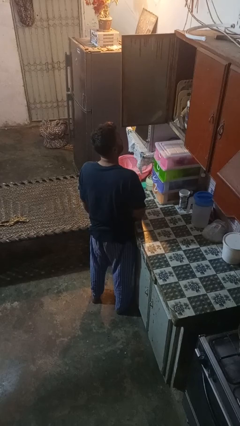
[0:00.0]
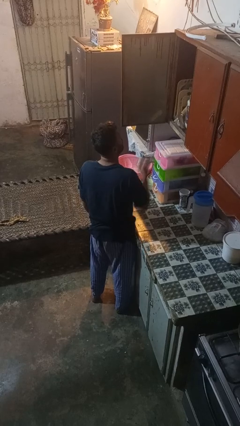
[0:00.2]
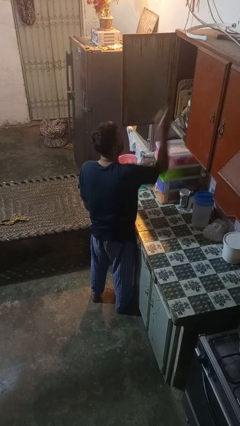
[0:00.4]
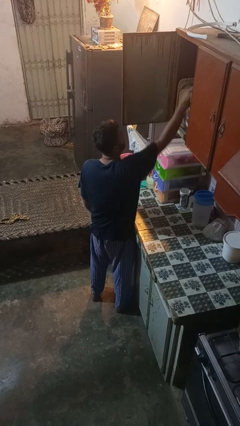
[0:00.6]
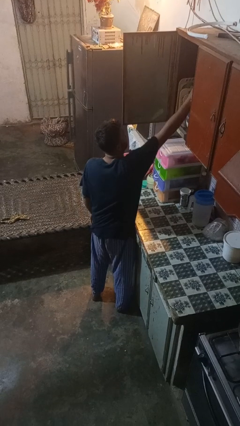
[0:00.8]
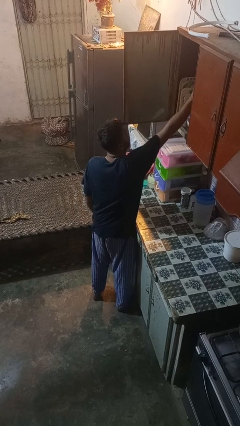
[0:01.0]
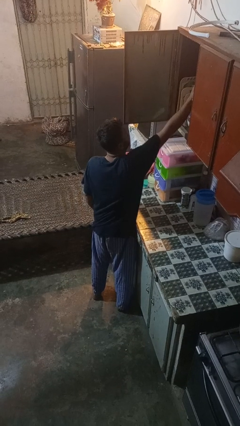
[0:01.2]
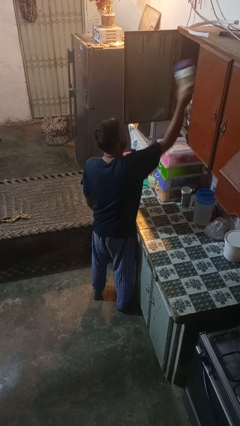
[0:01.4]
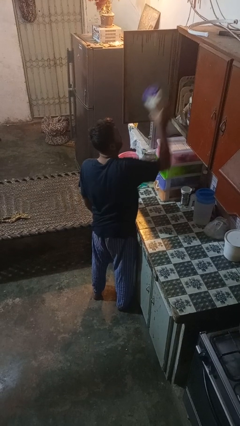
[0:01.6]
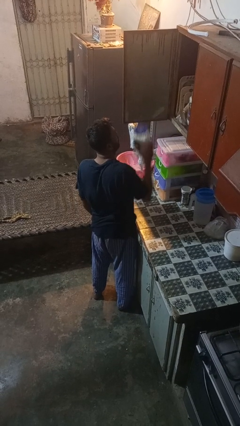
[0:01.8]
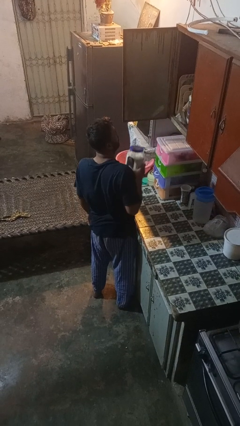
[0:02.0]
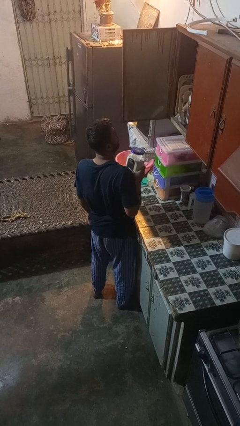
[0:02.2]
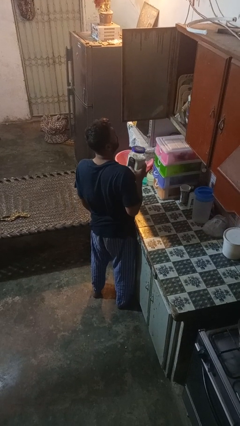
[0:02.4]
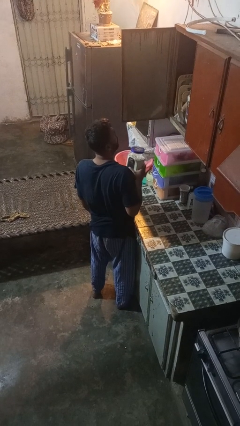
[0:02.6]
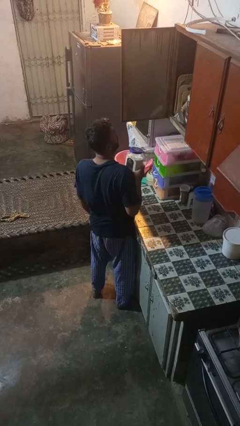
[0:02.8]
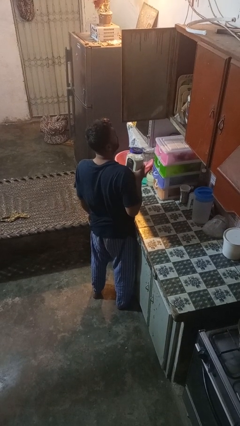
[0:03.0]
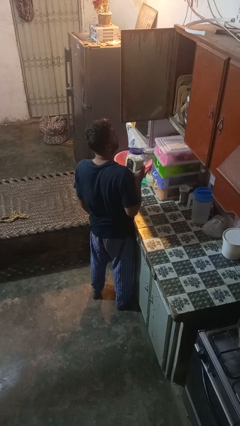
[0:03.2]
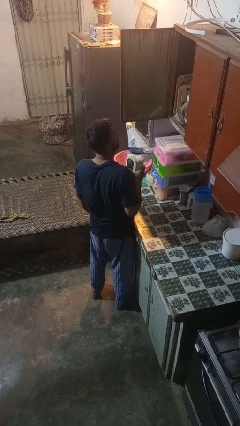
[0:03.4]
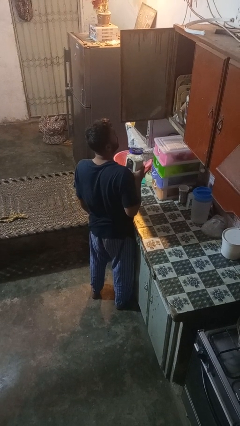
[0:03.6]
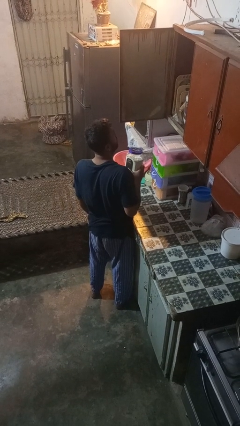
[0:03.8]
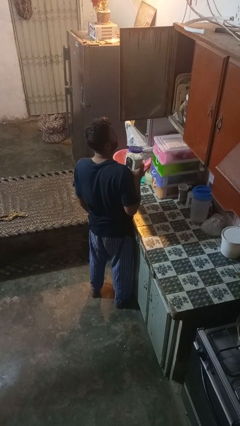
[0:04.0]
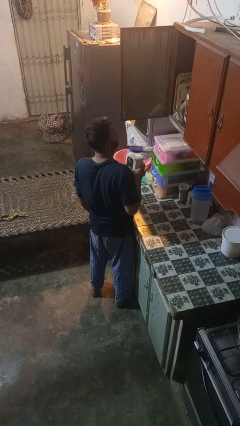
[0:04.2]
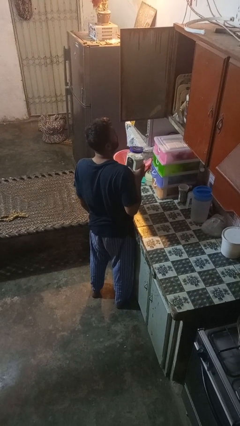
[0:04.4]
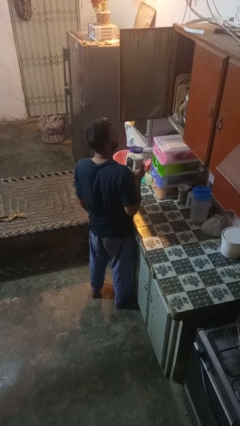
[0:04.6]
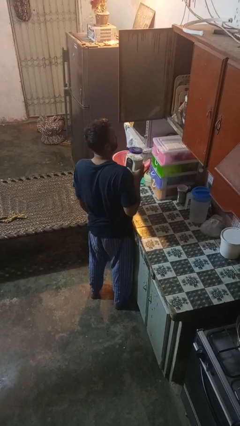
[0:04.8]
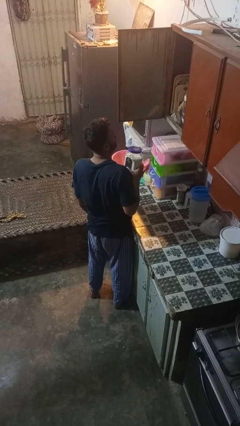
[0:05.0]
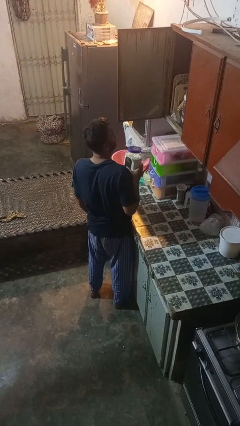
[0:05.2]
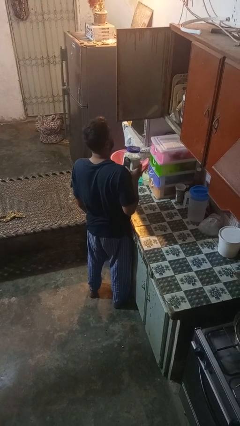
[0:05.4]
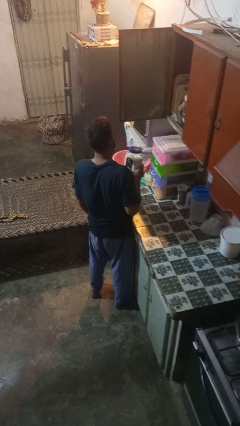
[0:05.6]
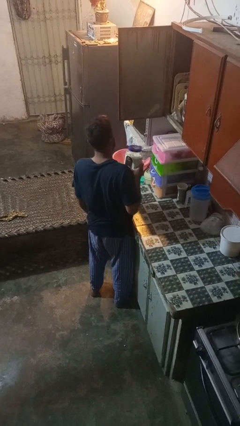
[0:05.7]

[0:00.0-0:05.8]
person puts object in cabinet

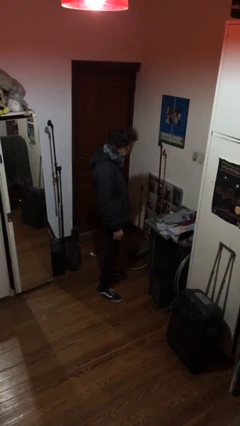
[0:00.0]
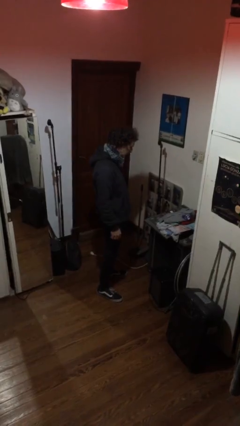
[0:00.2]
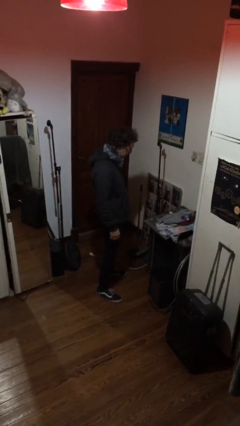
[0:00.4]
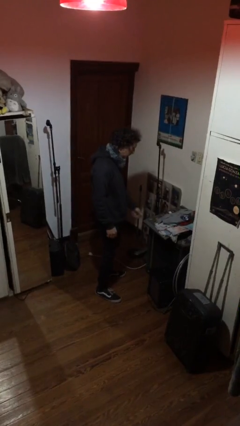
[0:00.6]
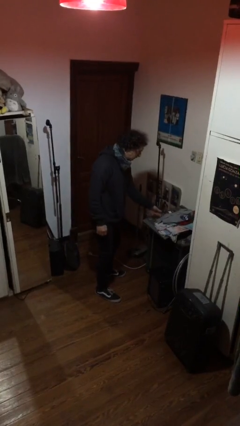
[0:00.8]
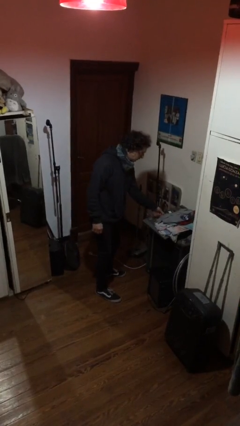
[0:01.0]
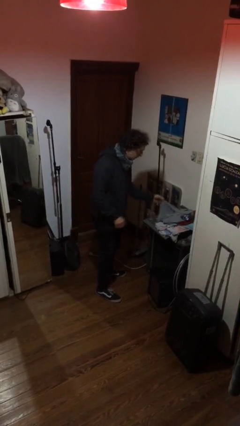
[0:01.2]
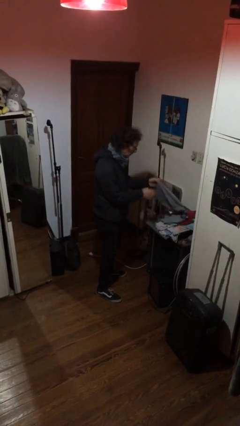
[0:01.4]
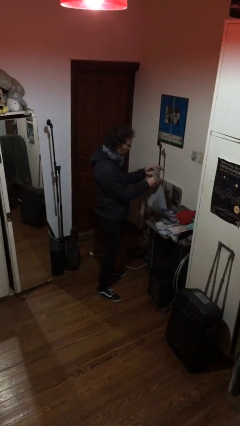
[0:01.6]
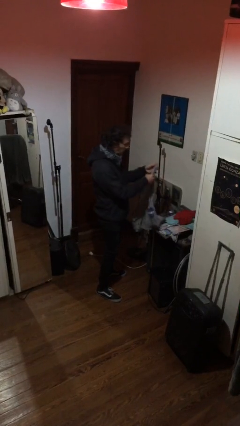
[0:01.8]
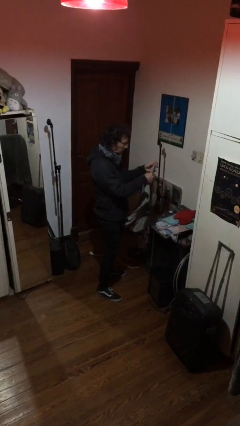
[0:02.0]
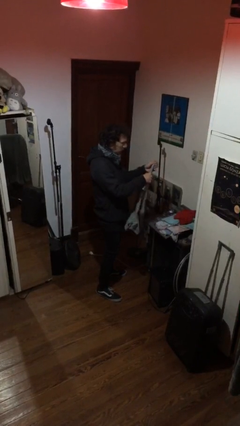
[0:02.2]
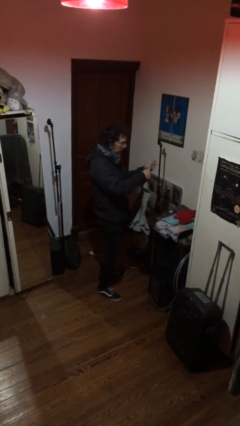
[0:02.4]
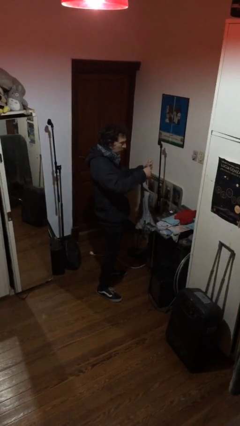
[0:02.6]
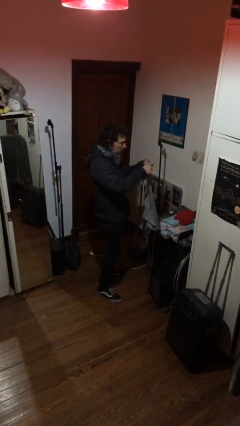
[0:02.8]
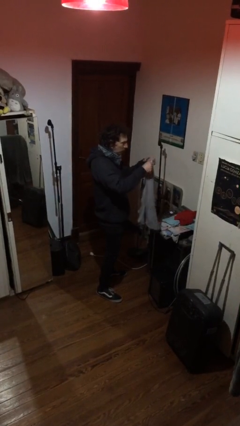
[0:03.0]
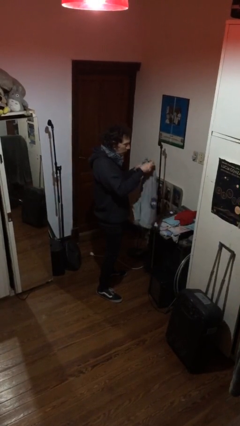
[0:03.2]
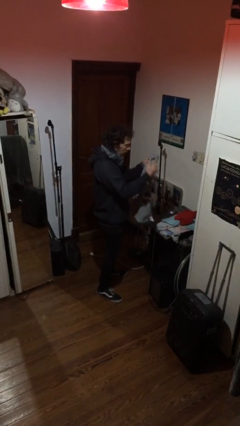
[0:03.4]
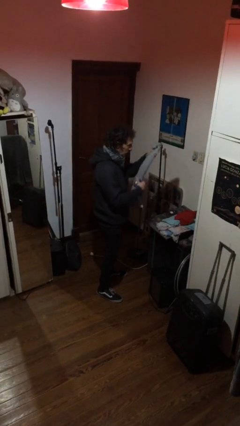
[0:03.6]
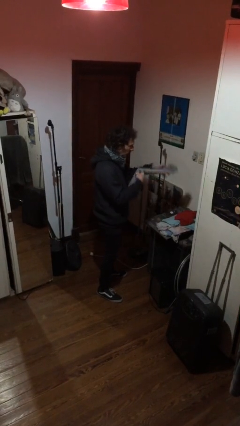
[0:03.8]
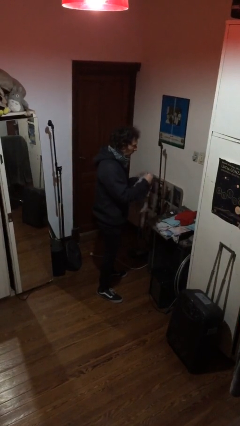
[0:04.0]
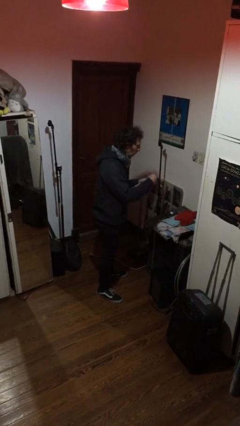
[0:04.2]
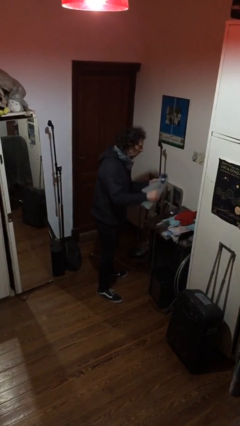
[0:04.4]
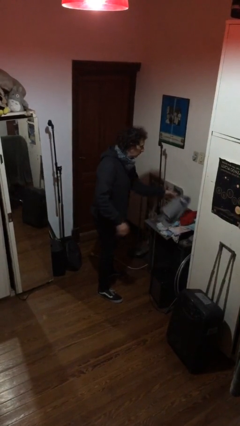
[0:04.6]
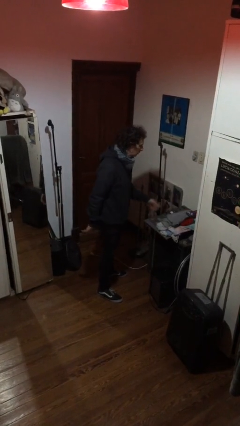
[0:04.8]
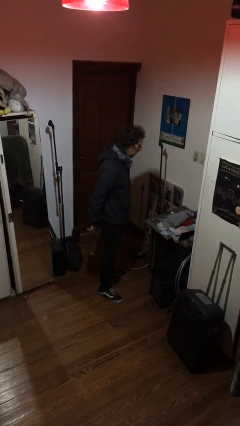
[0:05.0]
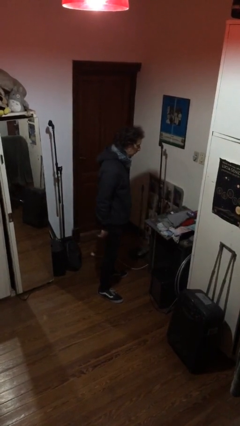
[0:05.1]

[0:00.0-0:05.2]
person folds shirt

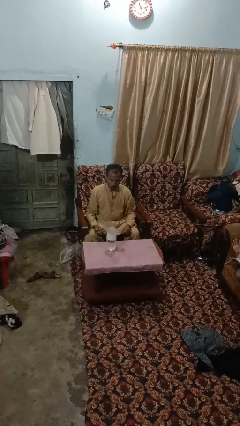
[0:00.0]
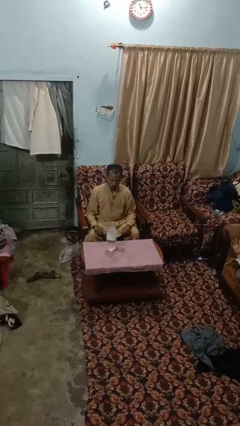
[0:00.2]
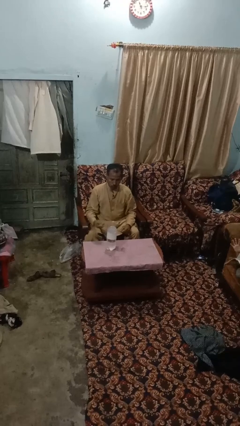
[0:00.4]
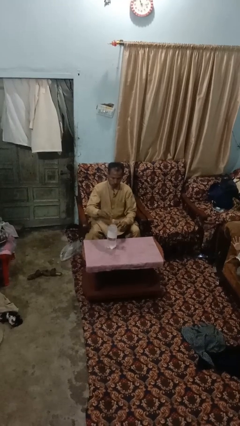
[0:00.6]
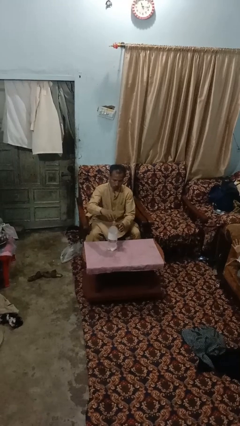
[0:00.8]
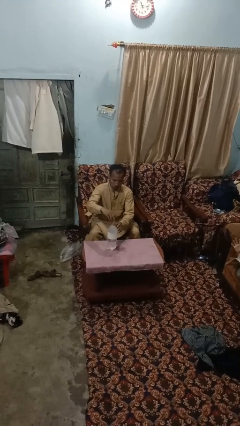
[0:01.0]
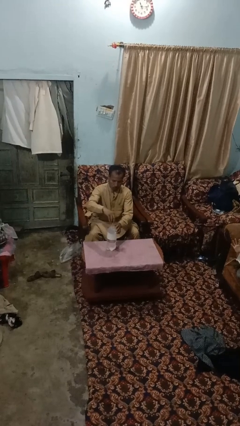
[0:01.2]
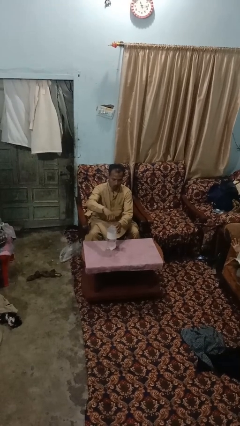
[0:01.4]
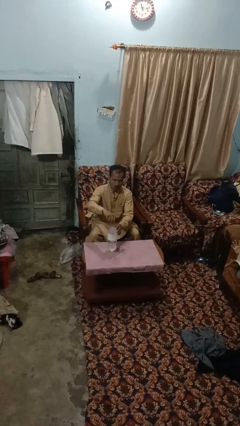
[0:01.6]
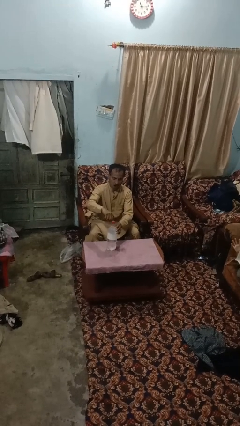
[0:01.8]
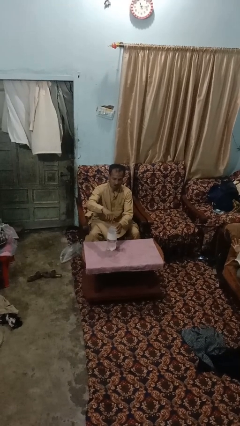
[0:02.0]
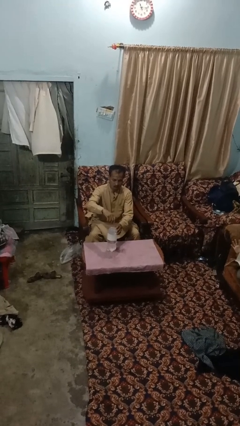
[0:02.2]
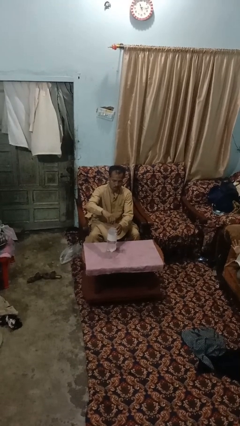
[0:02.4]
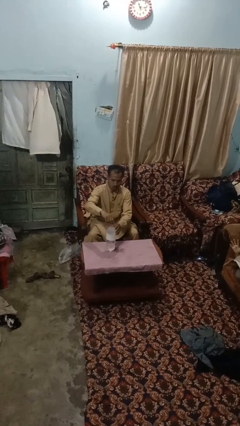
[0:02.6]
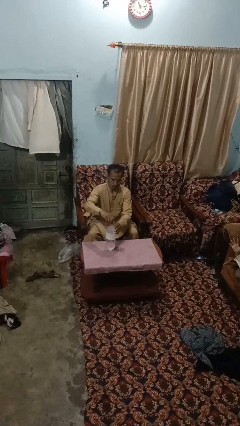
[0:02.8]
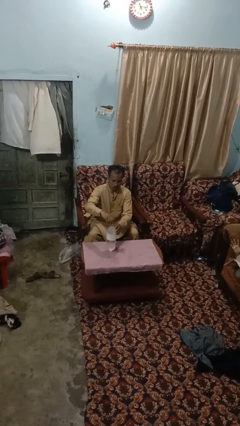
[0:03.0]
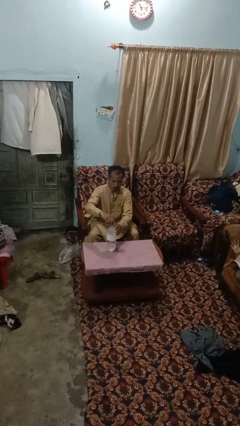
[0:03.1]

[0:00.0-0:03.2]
person screws lid to bottle

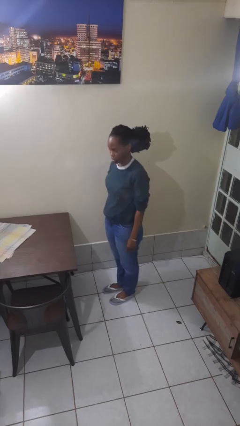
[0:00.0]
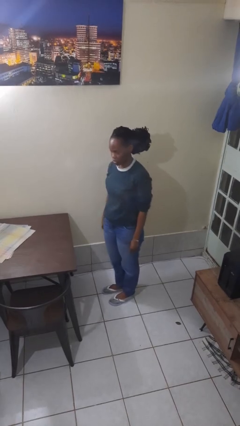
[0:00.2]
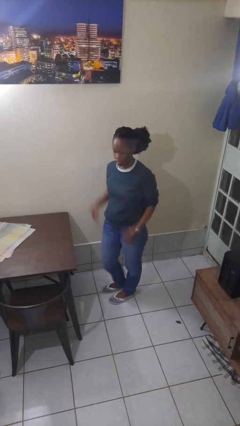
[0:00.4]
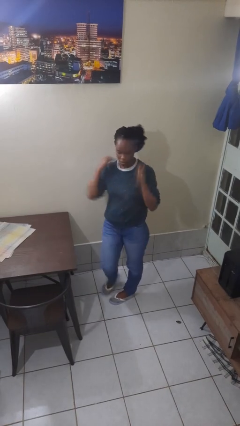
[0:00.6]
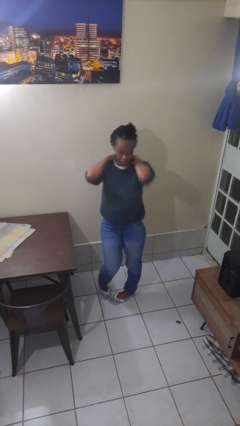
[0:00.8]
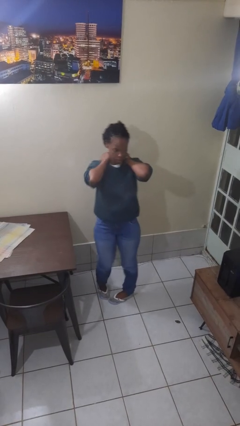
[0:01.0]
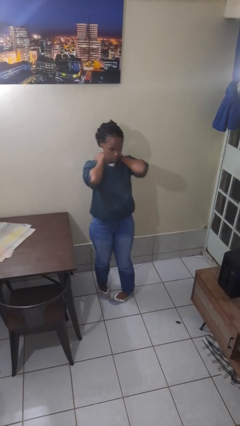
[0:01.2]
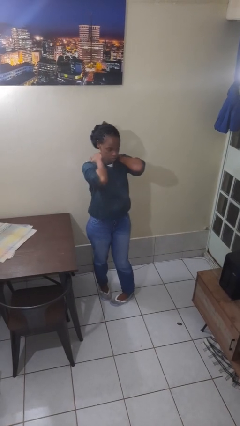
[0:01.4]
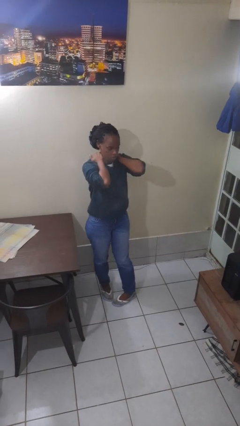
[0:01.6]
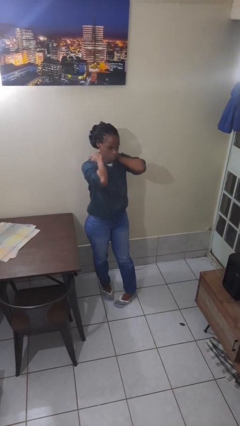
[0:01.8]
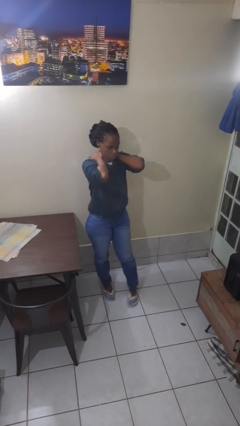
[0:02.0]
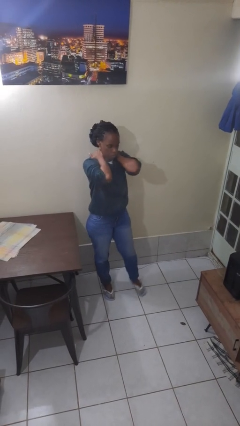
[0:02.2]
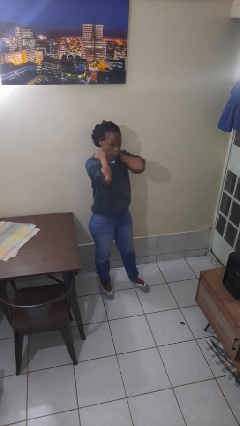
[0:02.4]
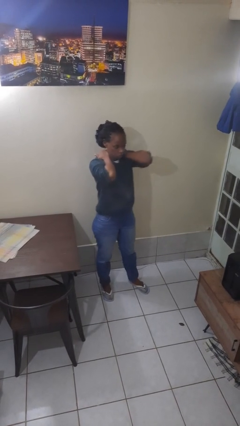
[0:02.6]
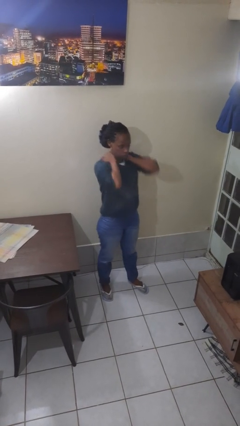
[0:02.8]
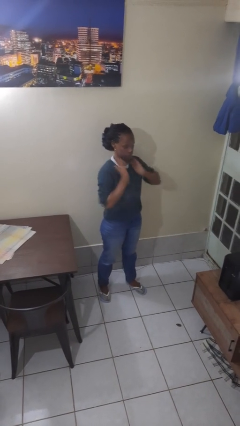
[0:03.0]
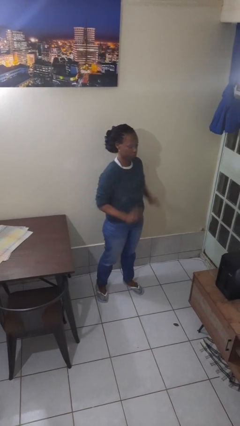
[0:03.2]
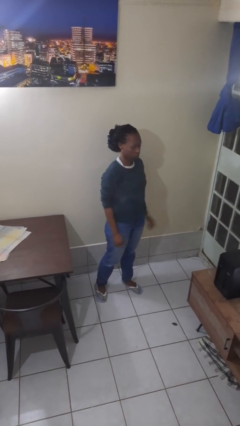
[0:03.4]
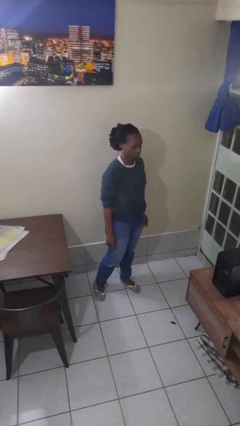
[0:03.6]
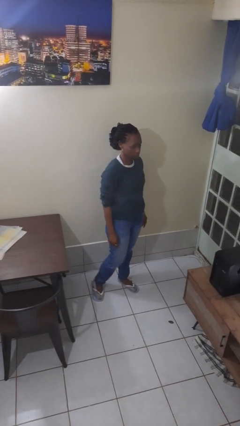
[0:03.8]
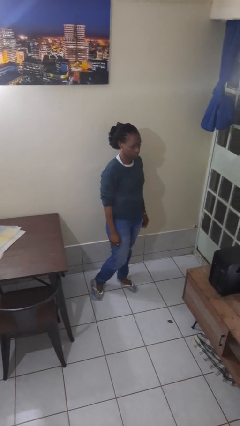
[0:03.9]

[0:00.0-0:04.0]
person rubs neck
